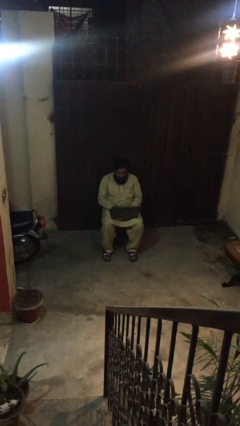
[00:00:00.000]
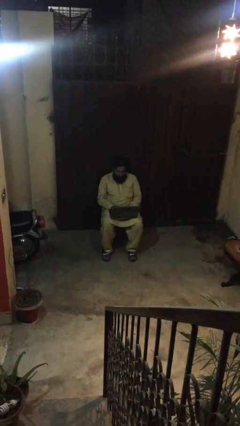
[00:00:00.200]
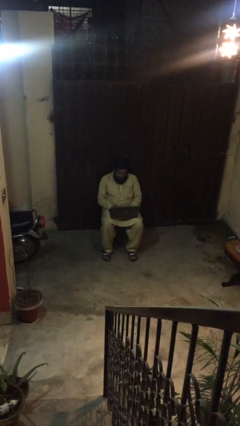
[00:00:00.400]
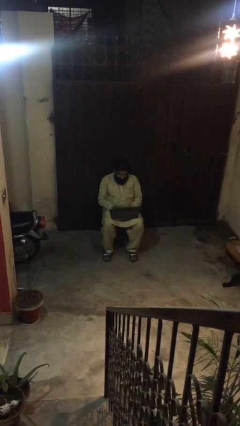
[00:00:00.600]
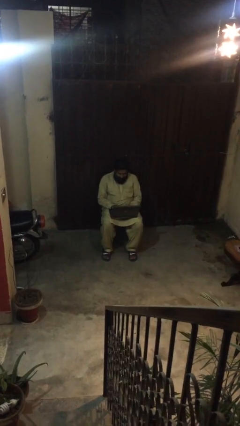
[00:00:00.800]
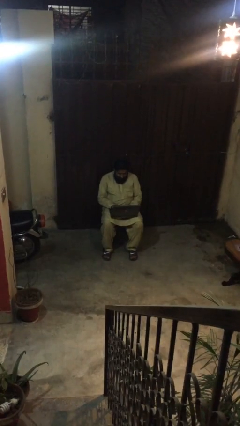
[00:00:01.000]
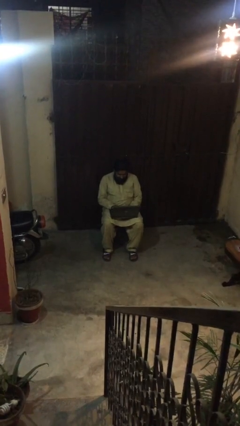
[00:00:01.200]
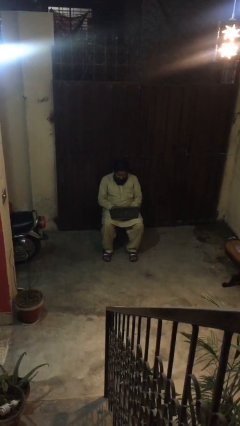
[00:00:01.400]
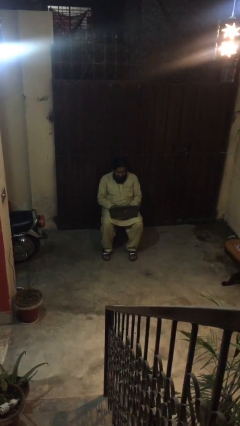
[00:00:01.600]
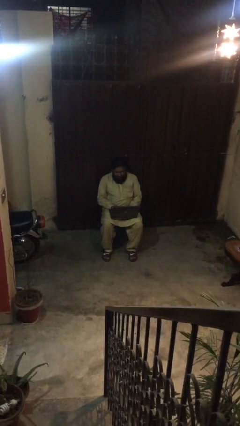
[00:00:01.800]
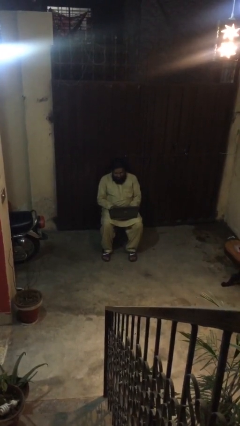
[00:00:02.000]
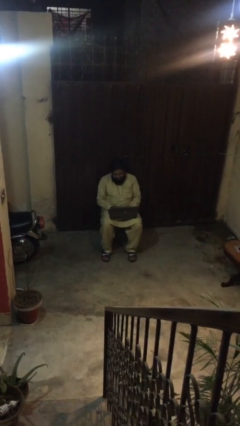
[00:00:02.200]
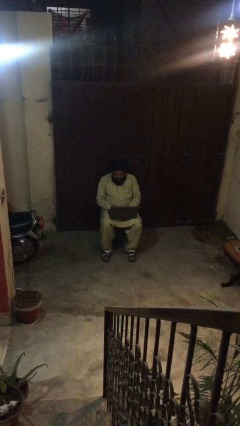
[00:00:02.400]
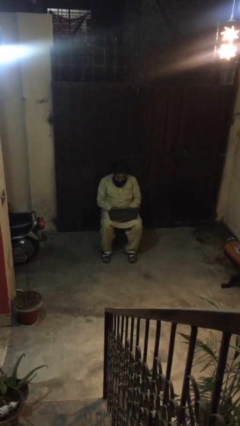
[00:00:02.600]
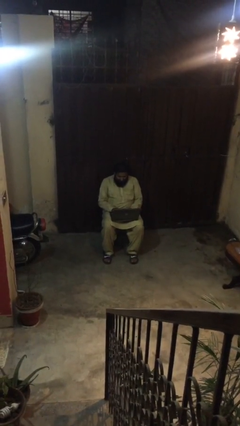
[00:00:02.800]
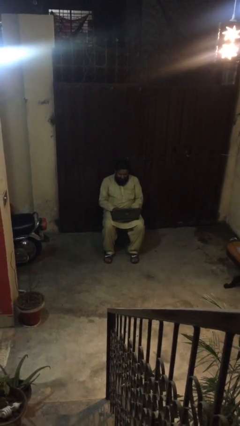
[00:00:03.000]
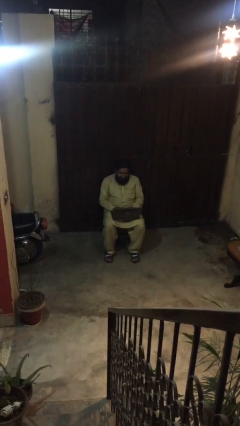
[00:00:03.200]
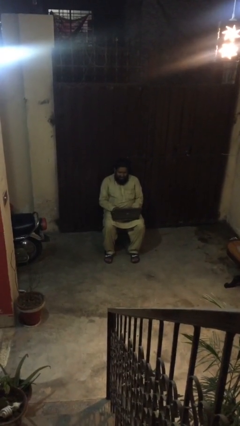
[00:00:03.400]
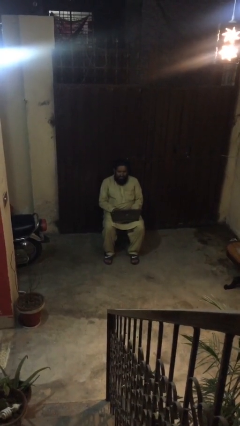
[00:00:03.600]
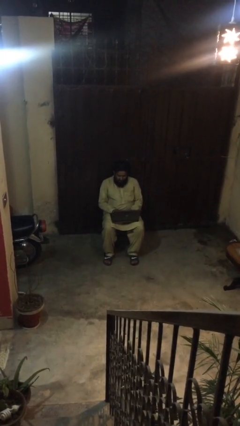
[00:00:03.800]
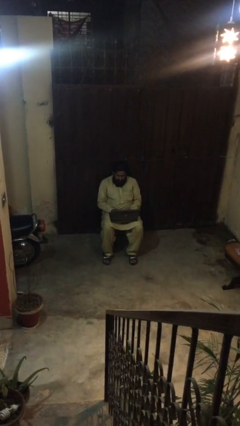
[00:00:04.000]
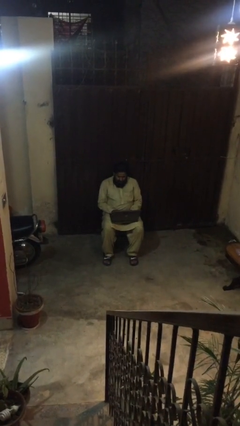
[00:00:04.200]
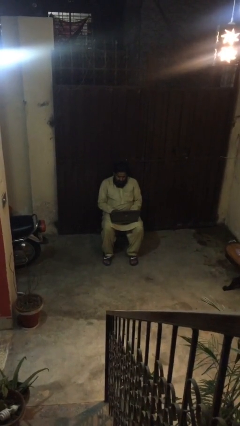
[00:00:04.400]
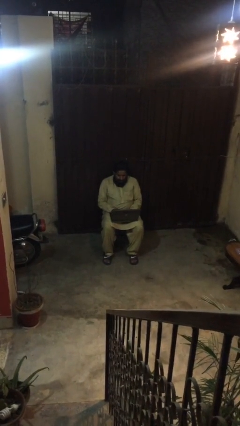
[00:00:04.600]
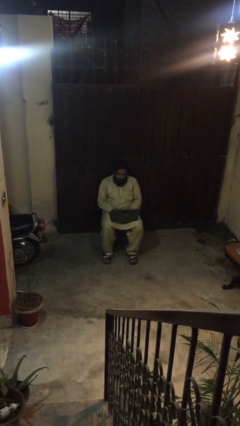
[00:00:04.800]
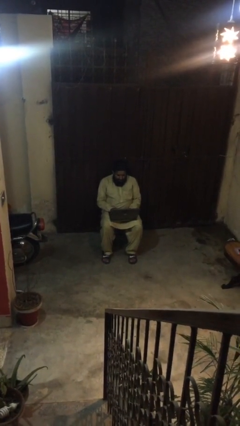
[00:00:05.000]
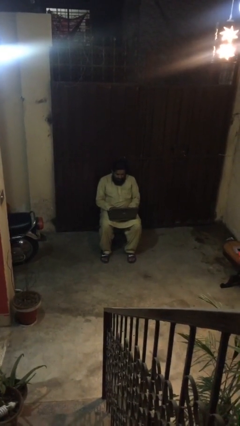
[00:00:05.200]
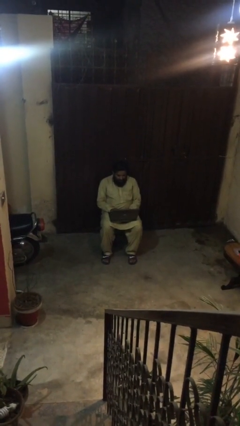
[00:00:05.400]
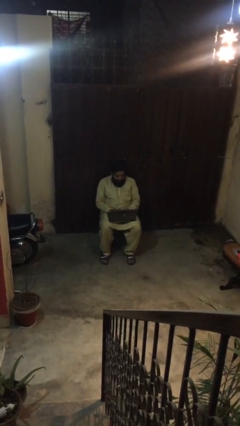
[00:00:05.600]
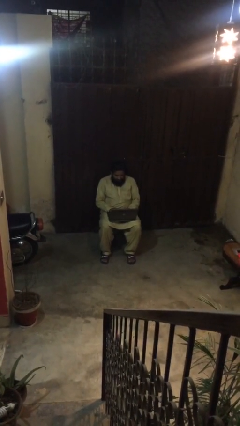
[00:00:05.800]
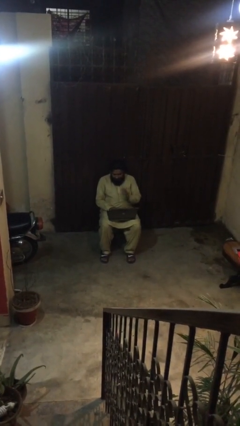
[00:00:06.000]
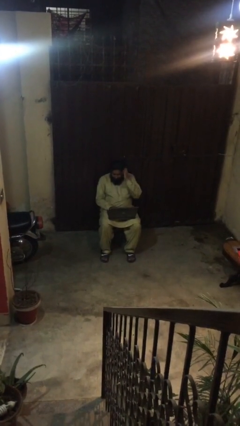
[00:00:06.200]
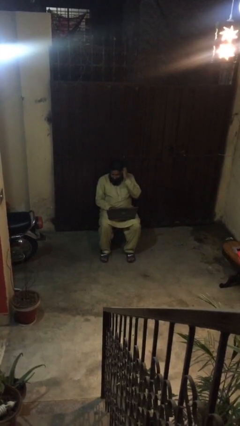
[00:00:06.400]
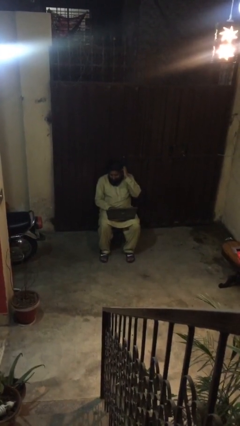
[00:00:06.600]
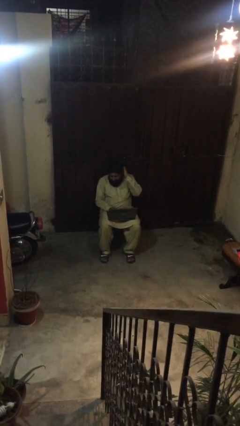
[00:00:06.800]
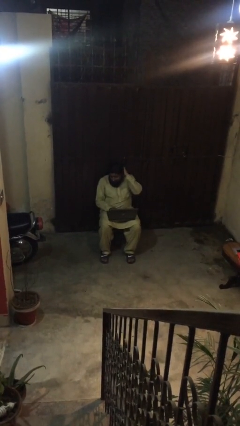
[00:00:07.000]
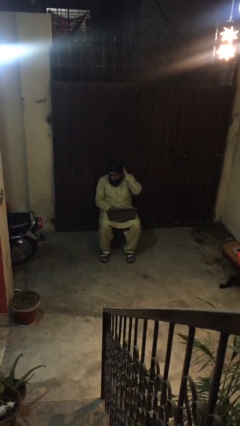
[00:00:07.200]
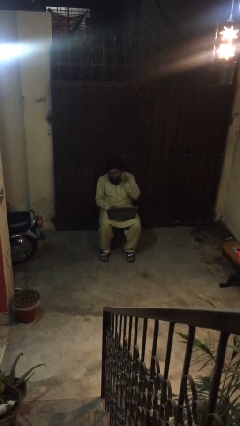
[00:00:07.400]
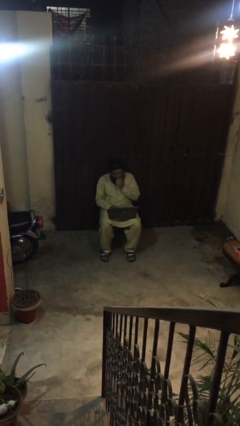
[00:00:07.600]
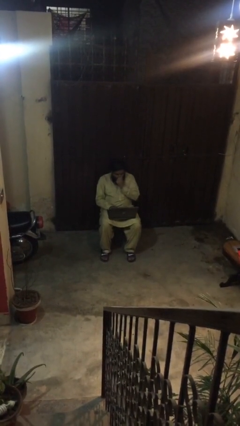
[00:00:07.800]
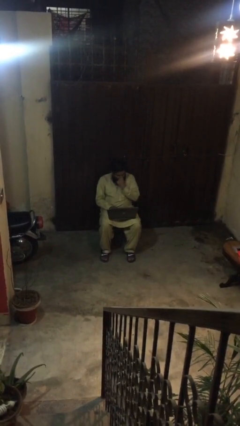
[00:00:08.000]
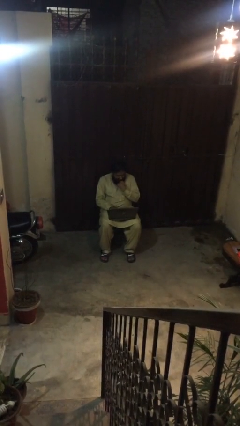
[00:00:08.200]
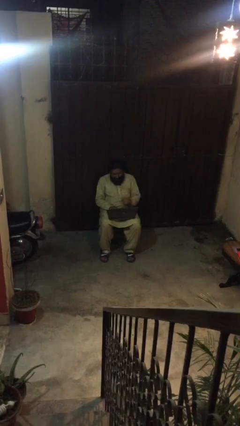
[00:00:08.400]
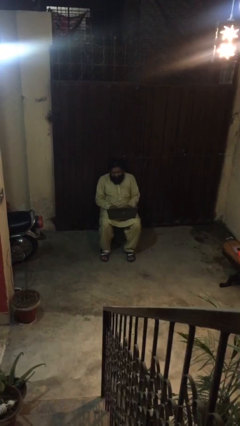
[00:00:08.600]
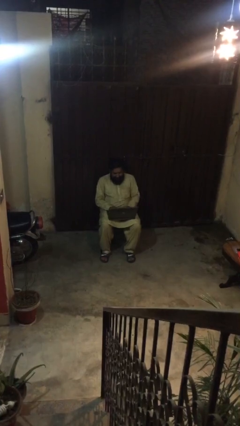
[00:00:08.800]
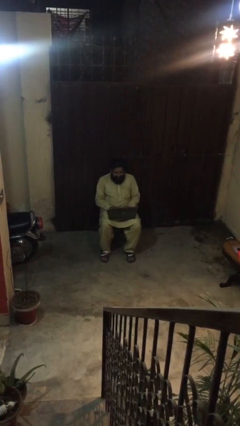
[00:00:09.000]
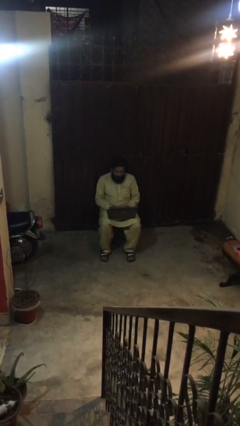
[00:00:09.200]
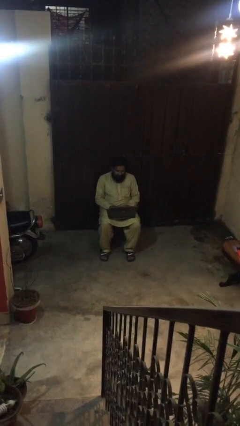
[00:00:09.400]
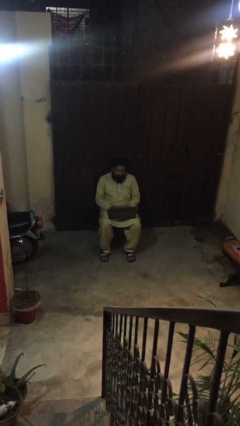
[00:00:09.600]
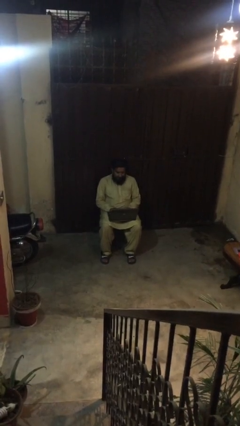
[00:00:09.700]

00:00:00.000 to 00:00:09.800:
person interacts with laptop

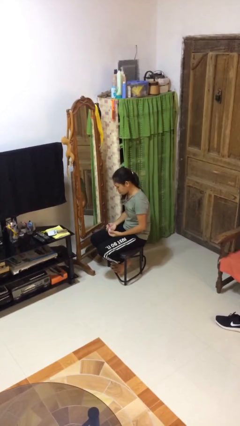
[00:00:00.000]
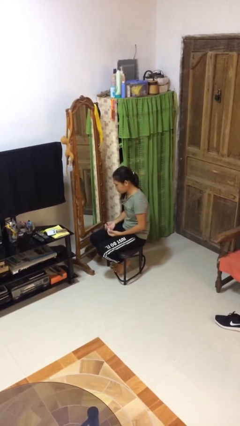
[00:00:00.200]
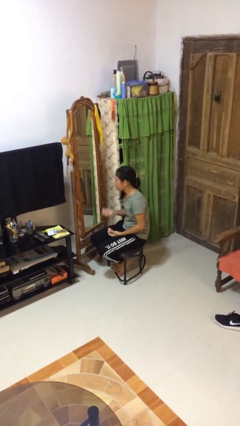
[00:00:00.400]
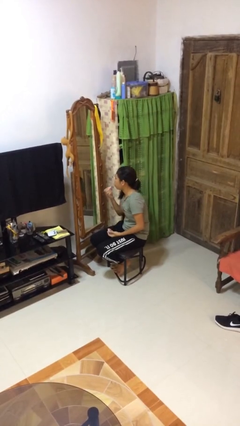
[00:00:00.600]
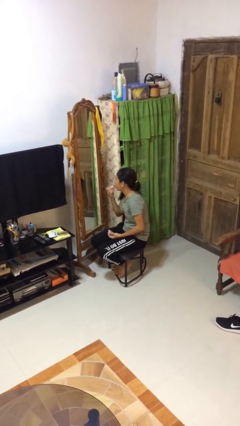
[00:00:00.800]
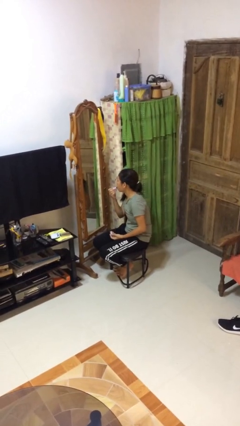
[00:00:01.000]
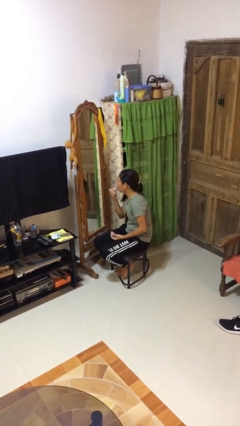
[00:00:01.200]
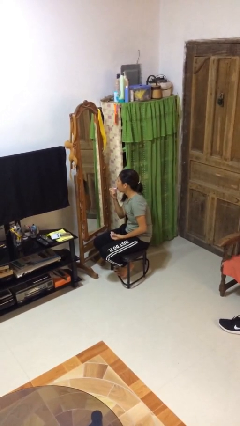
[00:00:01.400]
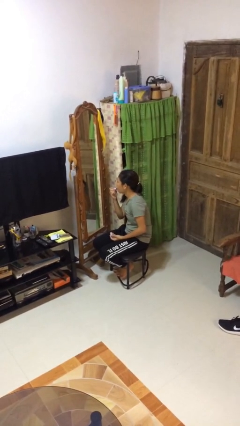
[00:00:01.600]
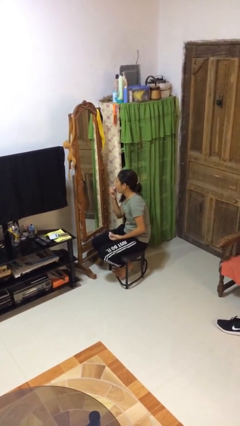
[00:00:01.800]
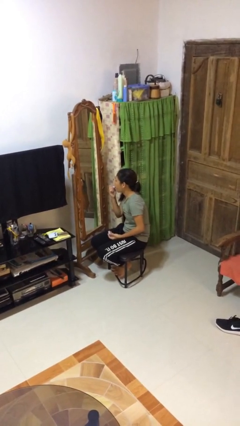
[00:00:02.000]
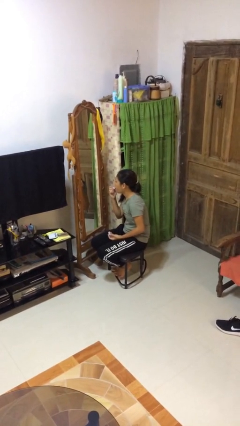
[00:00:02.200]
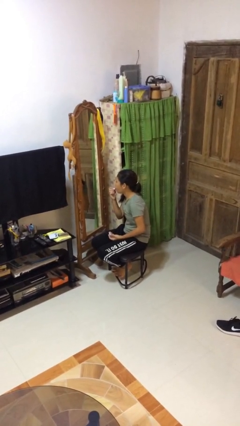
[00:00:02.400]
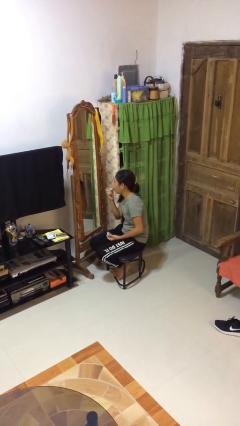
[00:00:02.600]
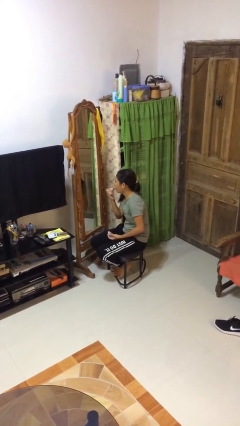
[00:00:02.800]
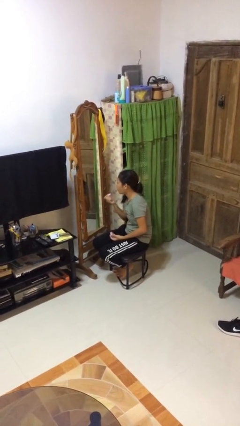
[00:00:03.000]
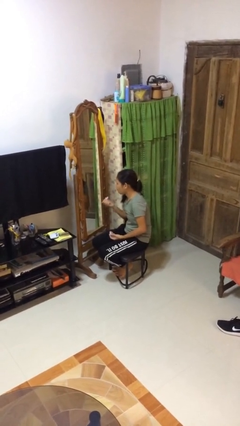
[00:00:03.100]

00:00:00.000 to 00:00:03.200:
person applies lip makeup

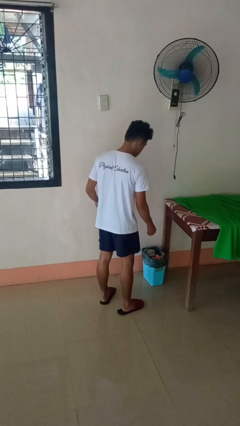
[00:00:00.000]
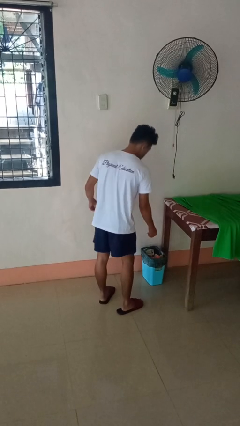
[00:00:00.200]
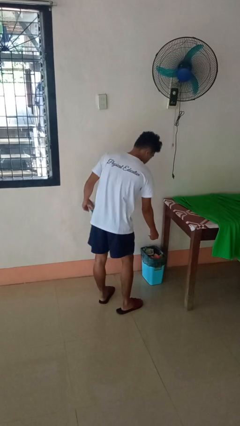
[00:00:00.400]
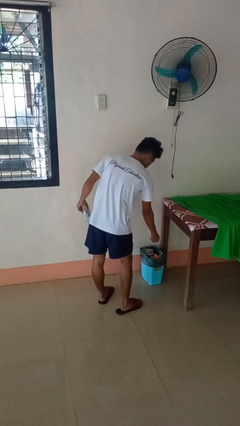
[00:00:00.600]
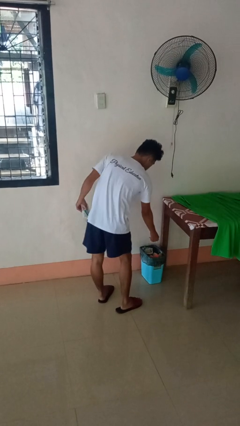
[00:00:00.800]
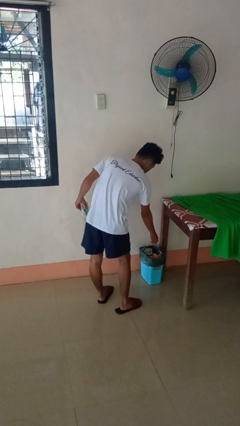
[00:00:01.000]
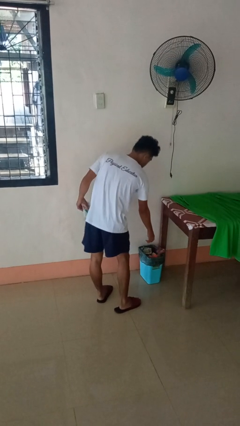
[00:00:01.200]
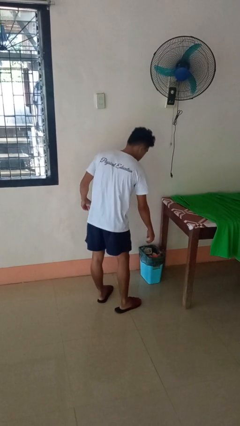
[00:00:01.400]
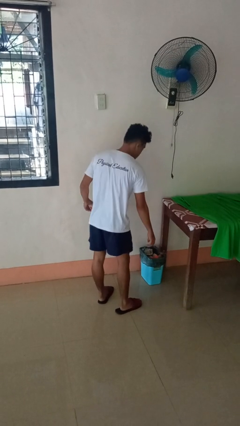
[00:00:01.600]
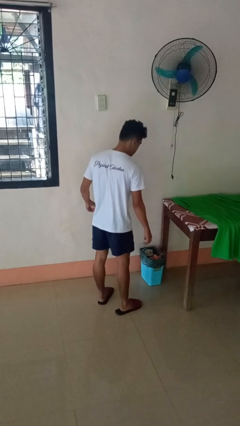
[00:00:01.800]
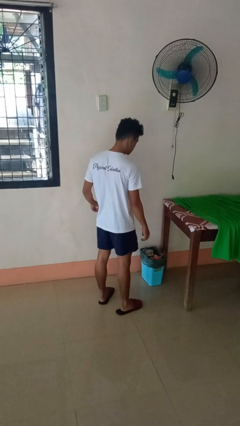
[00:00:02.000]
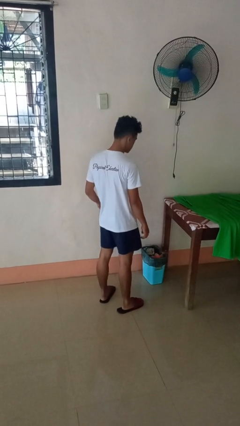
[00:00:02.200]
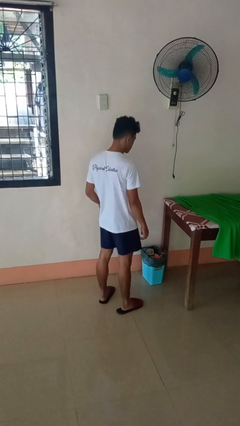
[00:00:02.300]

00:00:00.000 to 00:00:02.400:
person discards trash

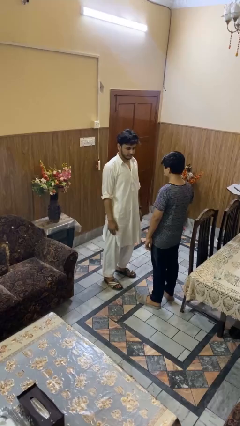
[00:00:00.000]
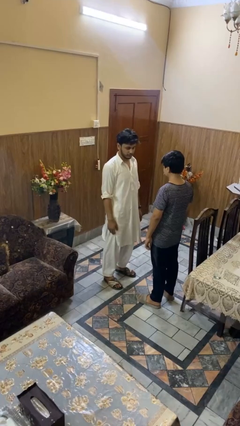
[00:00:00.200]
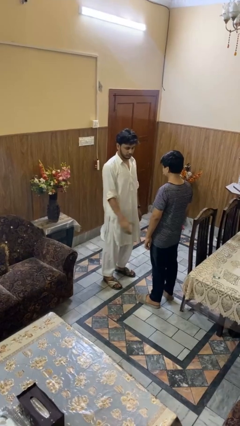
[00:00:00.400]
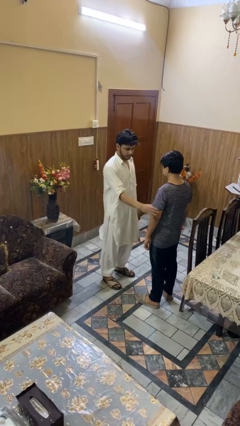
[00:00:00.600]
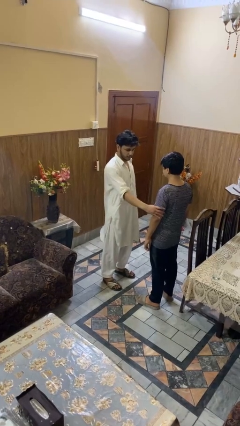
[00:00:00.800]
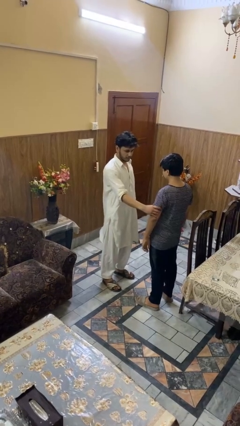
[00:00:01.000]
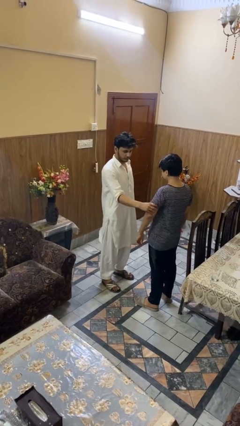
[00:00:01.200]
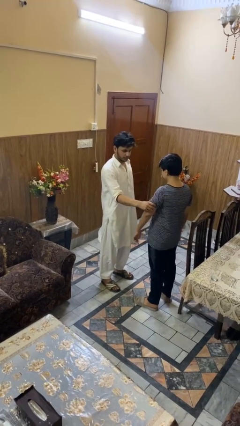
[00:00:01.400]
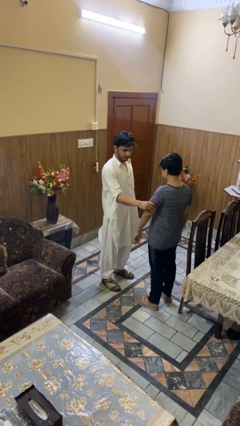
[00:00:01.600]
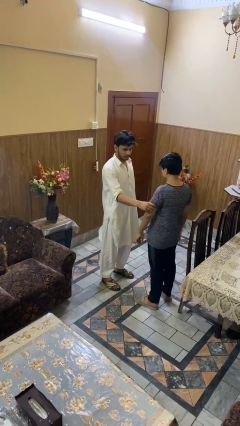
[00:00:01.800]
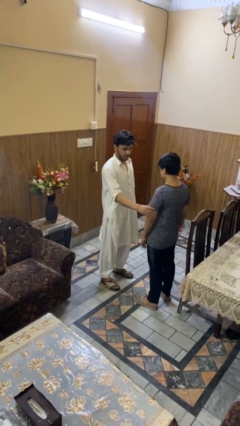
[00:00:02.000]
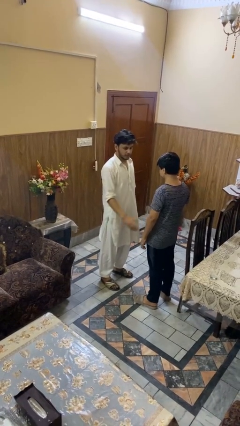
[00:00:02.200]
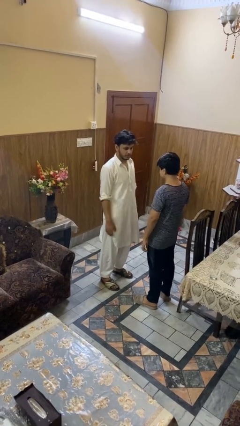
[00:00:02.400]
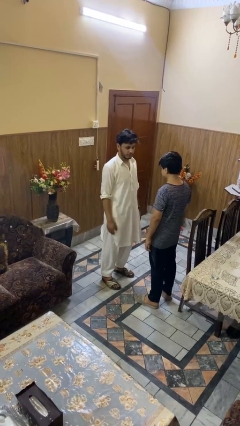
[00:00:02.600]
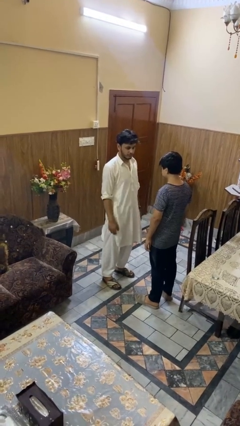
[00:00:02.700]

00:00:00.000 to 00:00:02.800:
person grabs person by bicep
